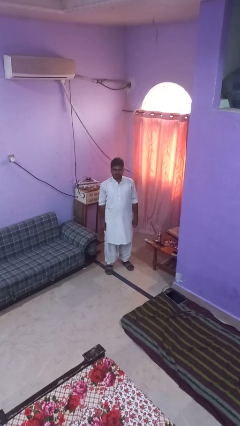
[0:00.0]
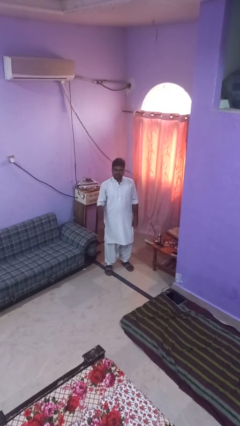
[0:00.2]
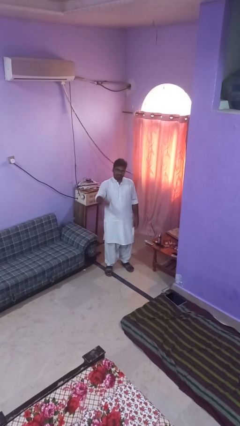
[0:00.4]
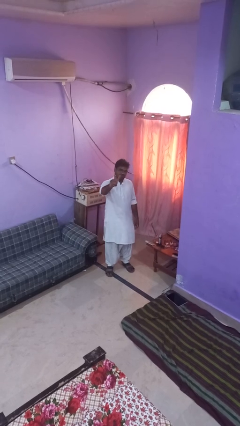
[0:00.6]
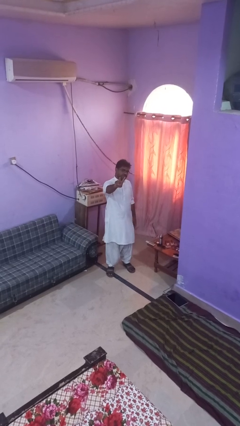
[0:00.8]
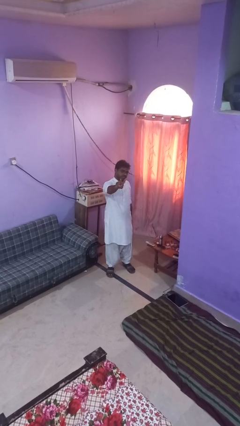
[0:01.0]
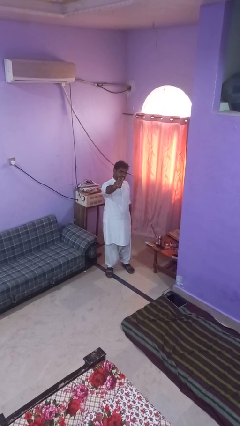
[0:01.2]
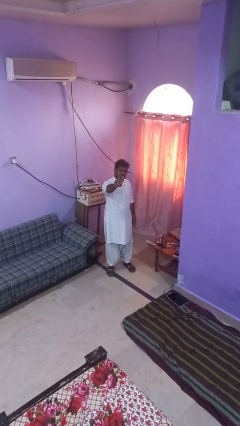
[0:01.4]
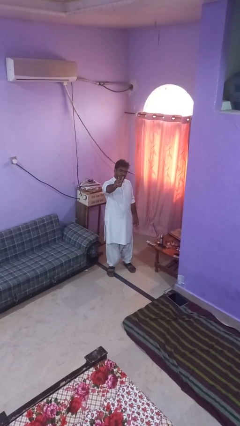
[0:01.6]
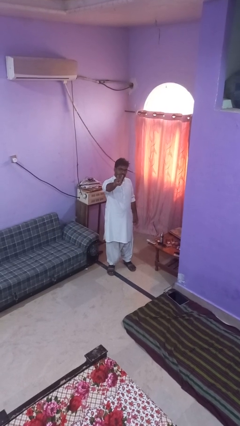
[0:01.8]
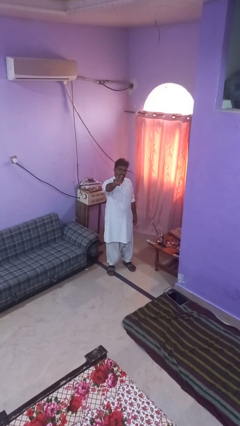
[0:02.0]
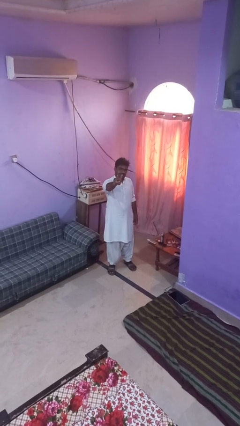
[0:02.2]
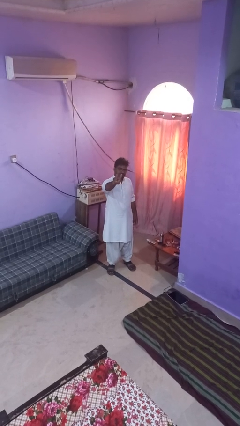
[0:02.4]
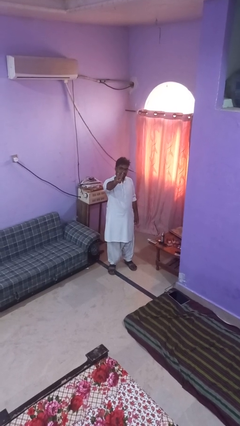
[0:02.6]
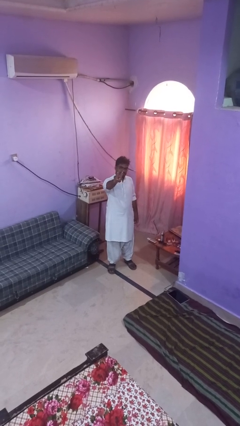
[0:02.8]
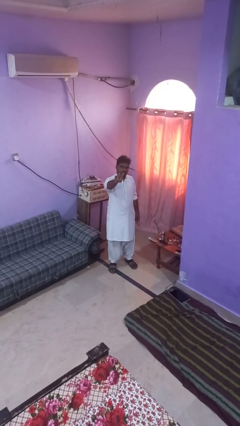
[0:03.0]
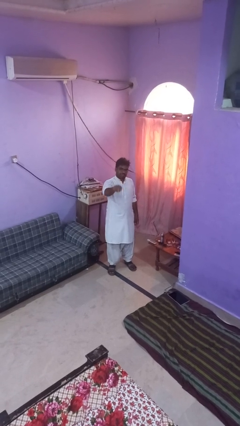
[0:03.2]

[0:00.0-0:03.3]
person gestures peace

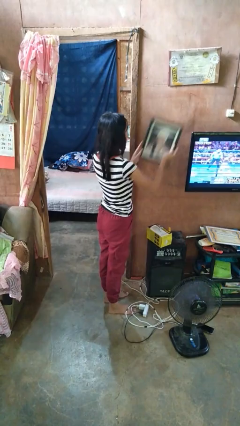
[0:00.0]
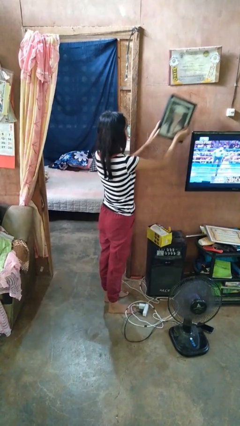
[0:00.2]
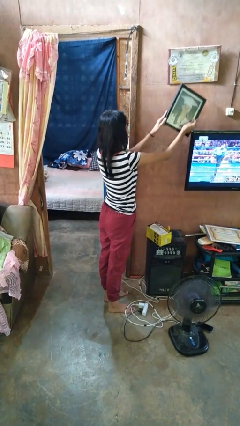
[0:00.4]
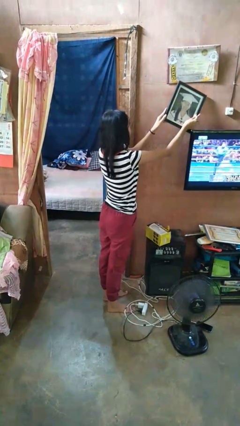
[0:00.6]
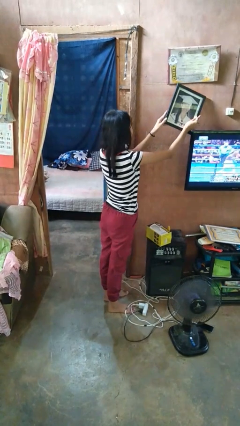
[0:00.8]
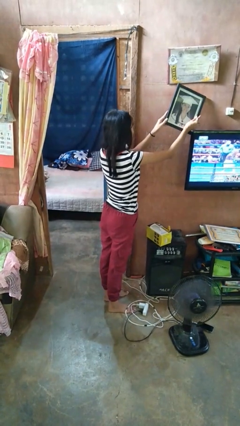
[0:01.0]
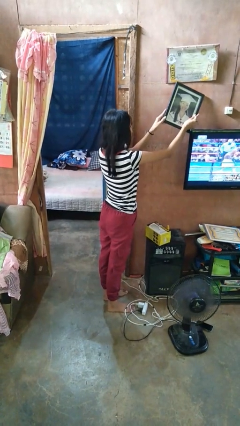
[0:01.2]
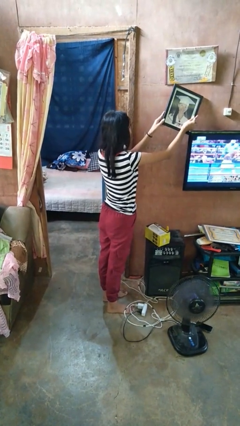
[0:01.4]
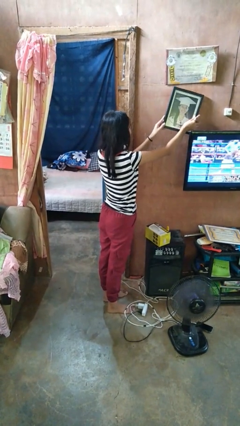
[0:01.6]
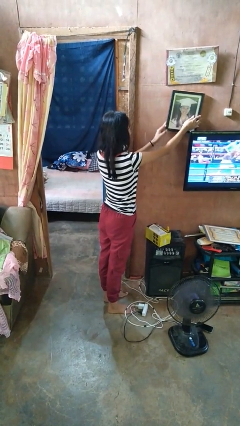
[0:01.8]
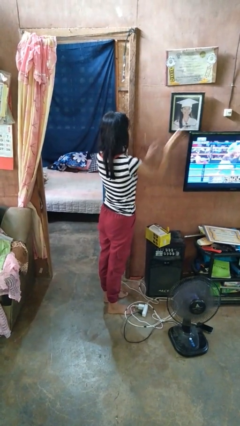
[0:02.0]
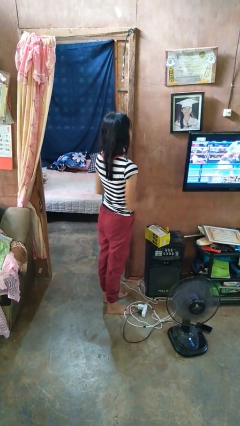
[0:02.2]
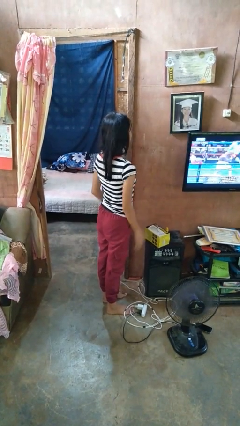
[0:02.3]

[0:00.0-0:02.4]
person puts up picture frame

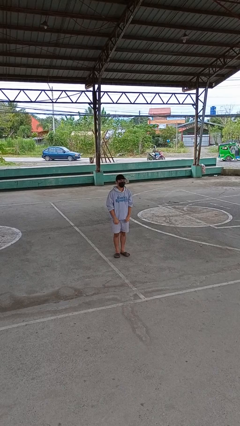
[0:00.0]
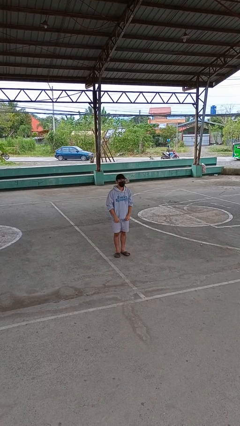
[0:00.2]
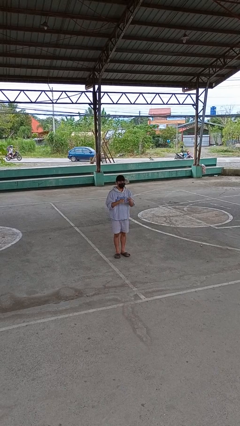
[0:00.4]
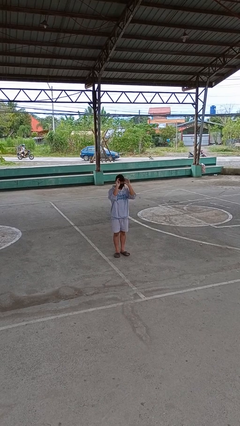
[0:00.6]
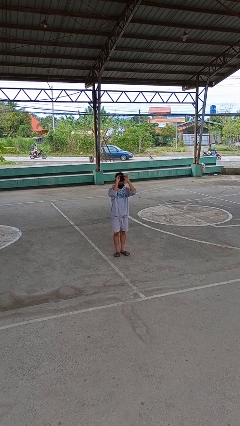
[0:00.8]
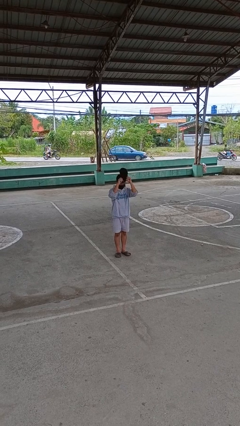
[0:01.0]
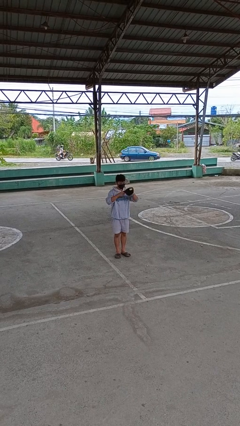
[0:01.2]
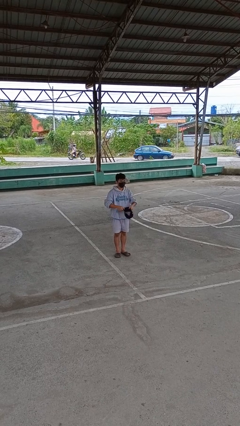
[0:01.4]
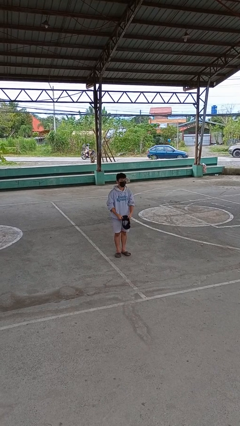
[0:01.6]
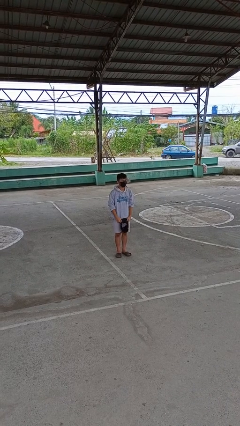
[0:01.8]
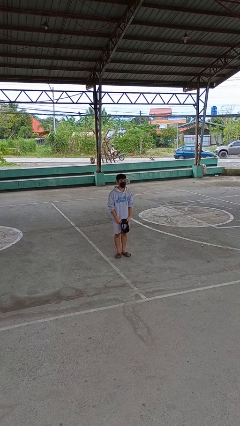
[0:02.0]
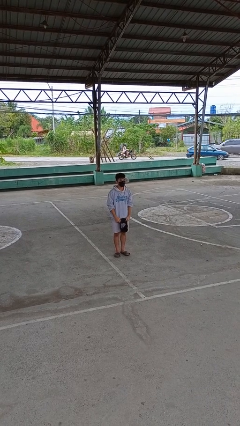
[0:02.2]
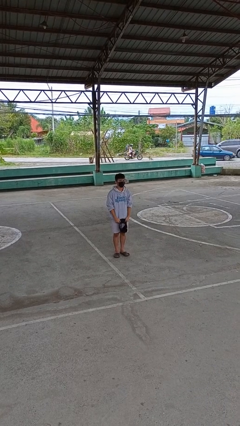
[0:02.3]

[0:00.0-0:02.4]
person takes off hat

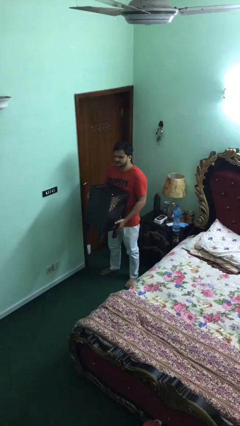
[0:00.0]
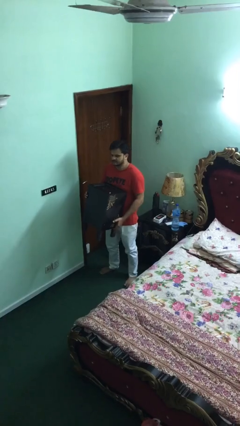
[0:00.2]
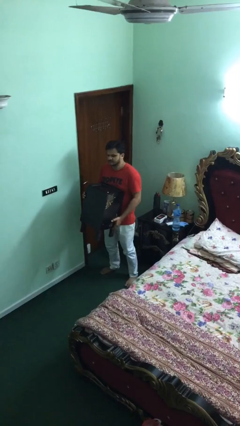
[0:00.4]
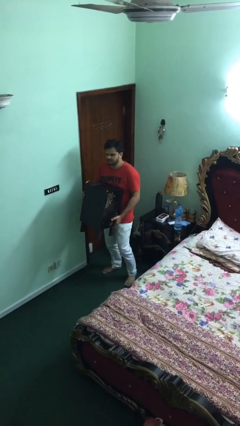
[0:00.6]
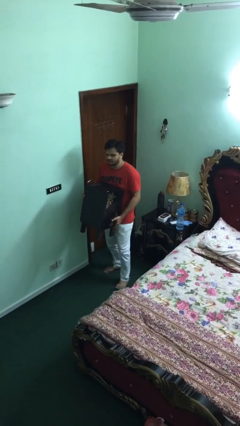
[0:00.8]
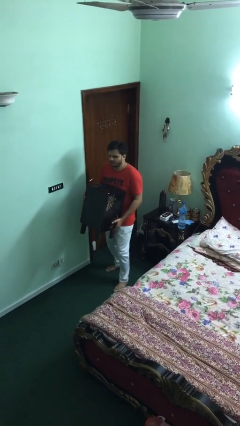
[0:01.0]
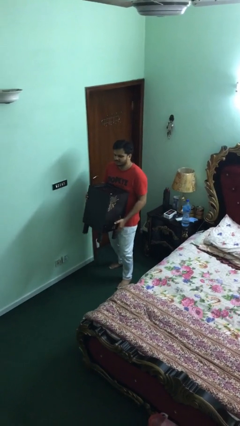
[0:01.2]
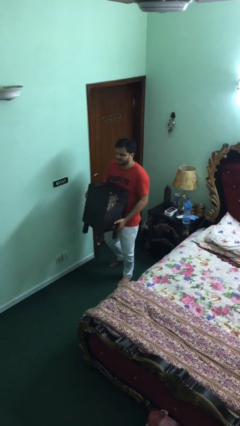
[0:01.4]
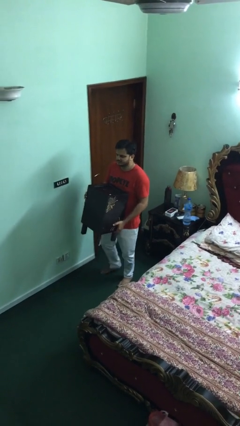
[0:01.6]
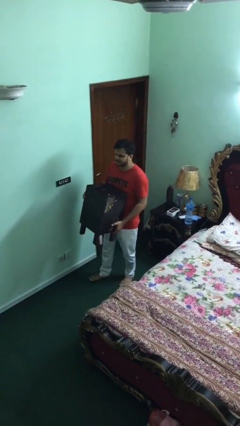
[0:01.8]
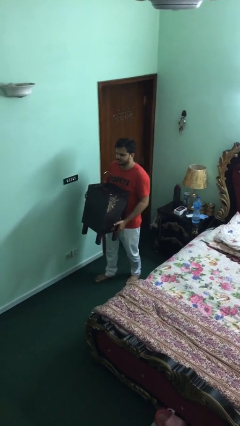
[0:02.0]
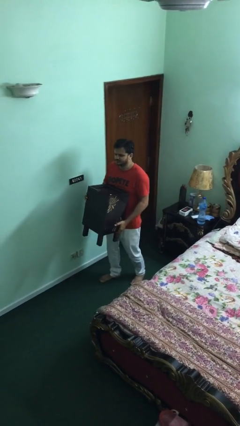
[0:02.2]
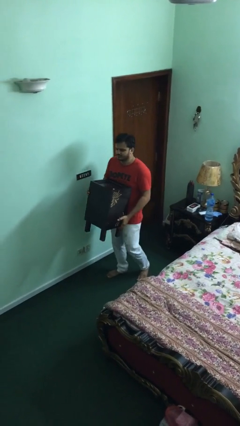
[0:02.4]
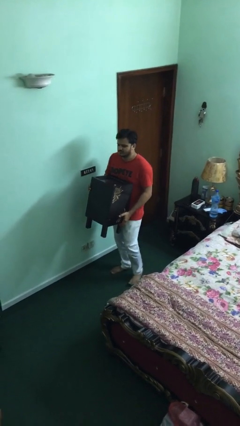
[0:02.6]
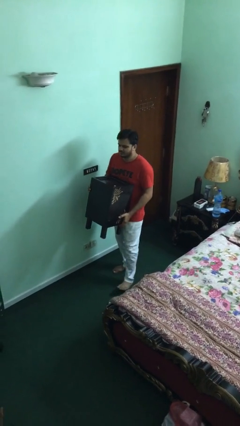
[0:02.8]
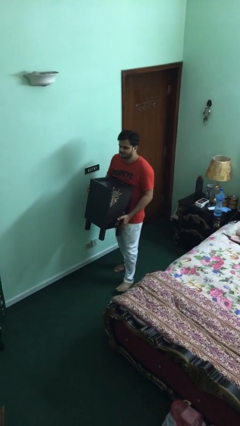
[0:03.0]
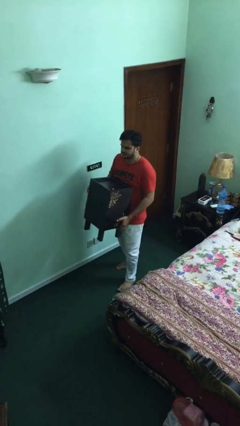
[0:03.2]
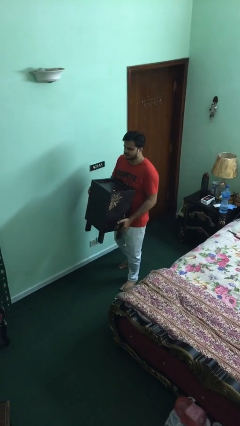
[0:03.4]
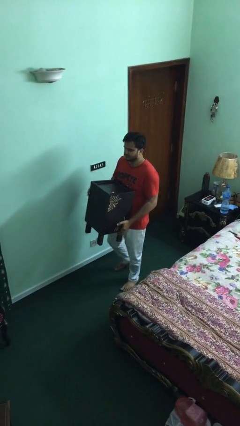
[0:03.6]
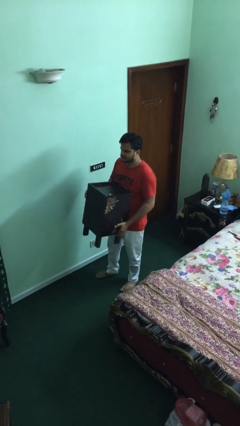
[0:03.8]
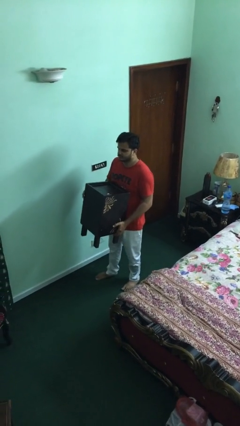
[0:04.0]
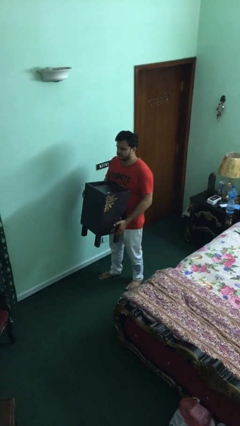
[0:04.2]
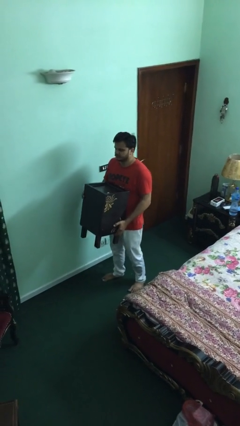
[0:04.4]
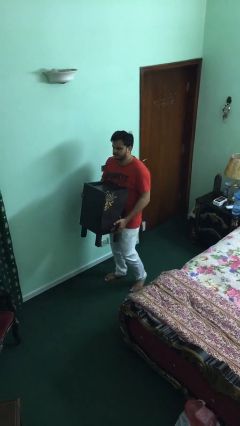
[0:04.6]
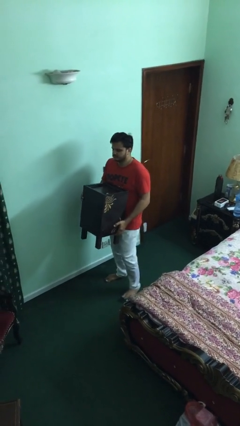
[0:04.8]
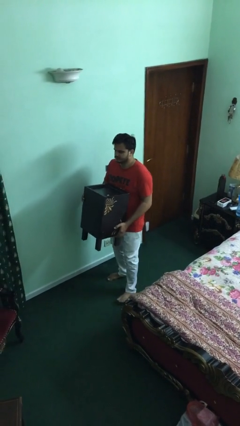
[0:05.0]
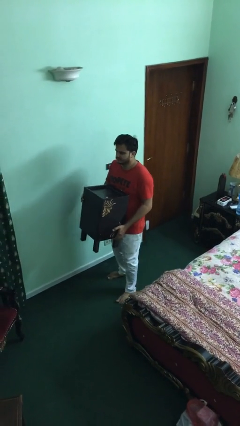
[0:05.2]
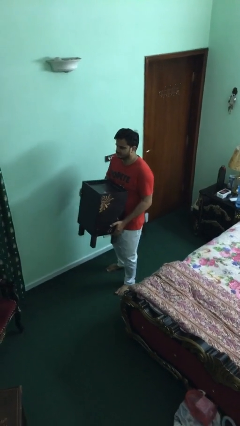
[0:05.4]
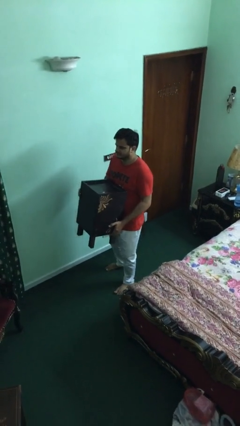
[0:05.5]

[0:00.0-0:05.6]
person carries heavy object

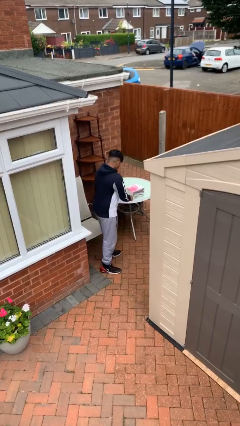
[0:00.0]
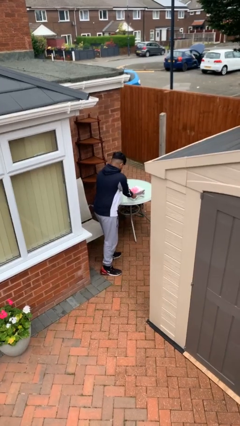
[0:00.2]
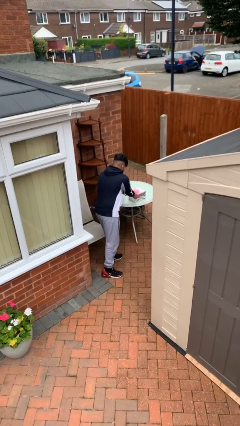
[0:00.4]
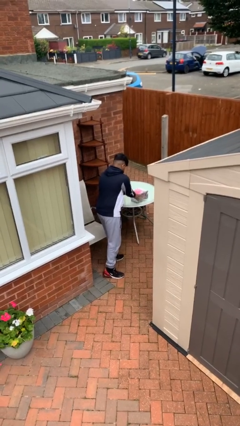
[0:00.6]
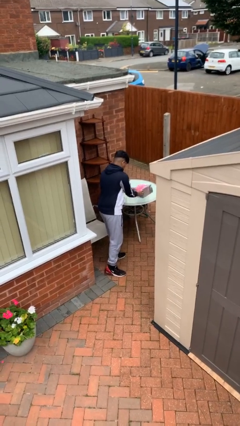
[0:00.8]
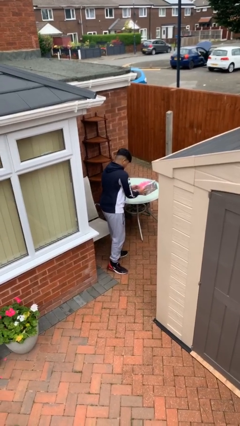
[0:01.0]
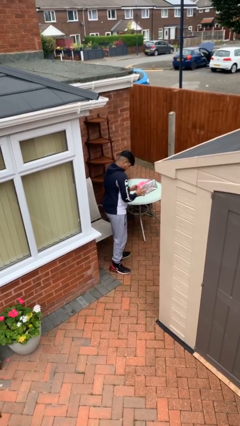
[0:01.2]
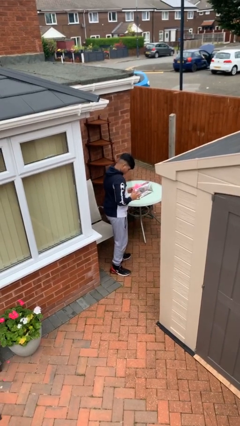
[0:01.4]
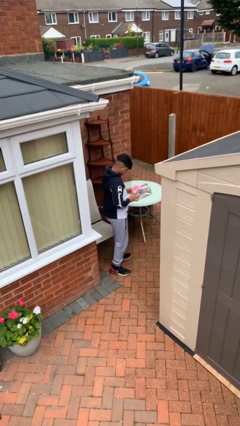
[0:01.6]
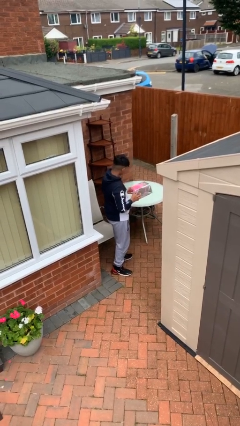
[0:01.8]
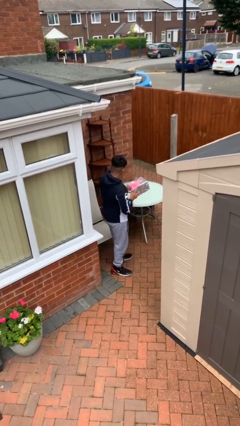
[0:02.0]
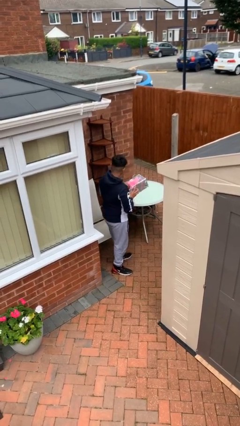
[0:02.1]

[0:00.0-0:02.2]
person picks up object from table

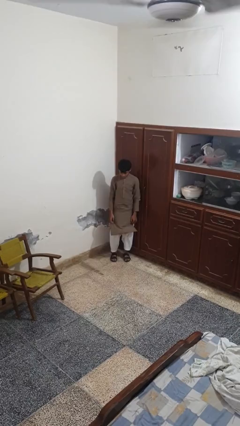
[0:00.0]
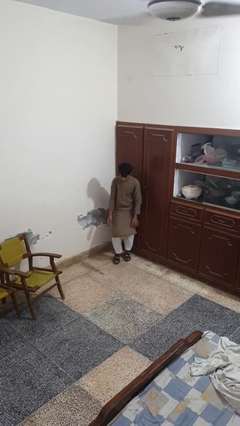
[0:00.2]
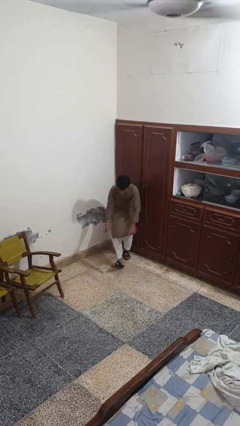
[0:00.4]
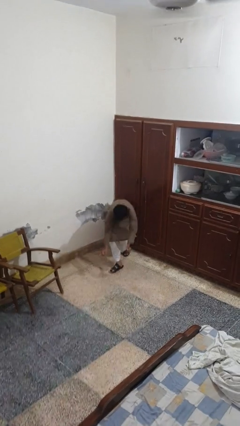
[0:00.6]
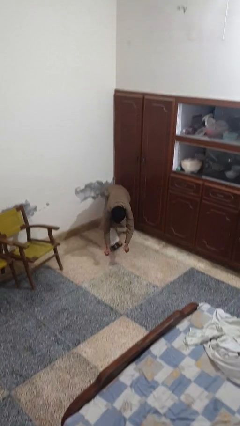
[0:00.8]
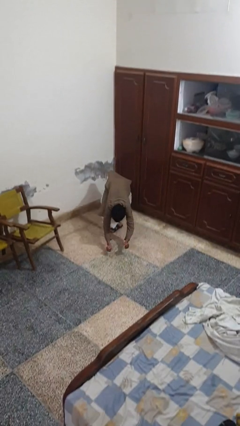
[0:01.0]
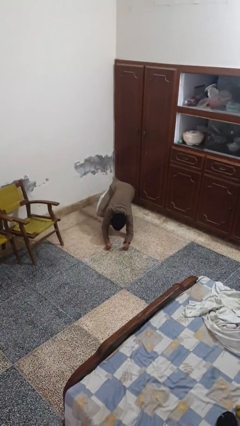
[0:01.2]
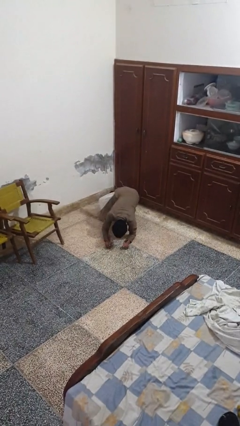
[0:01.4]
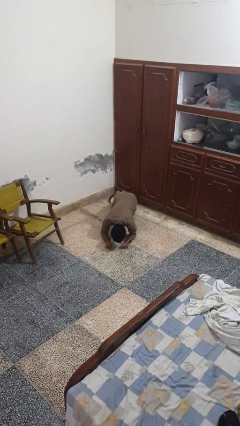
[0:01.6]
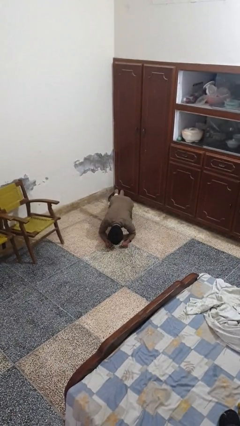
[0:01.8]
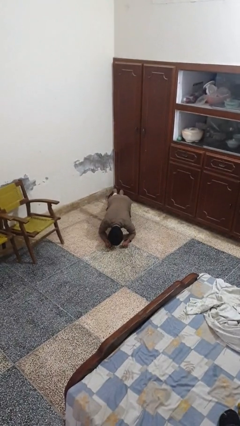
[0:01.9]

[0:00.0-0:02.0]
person exercises with plank
